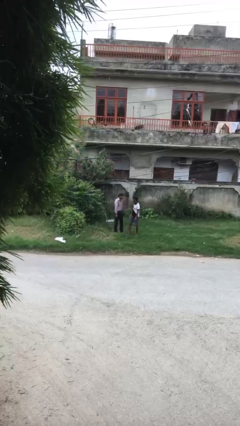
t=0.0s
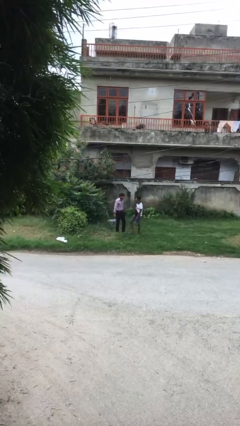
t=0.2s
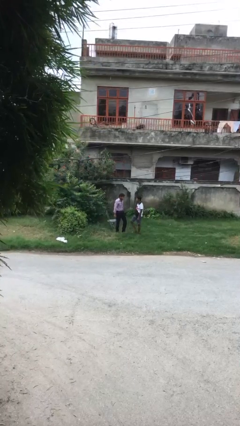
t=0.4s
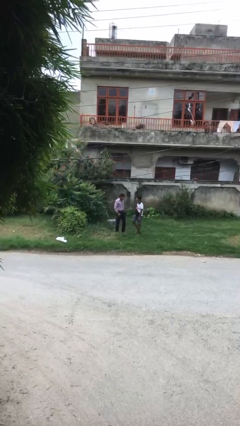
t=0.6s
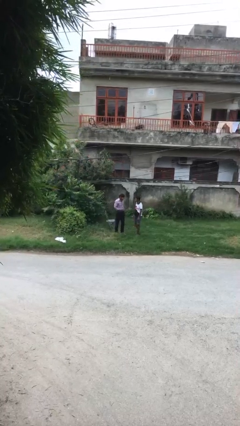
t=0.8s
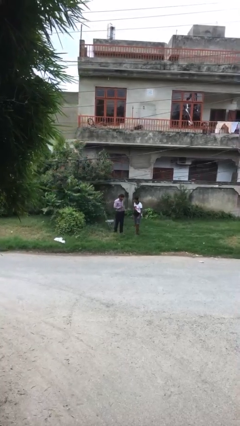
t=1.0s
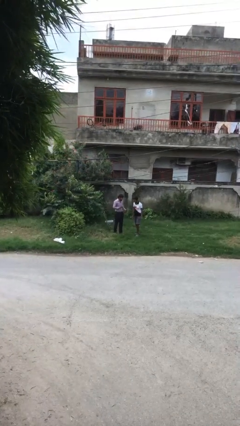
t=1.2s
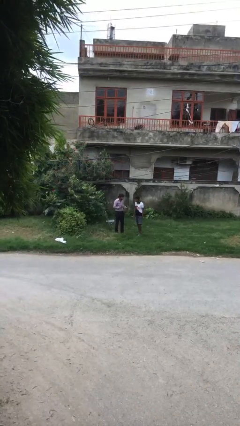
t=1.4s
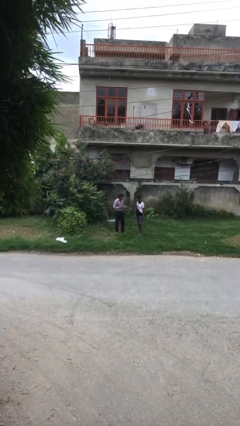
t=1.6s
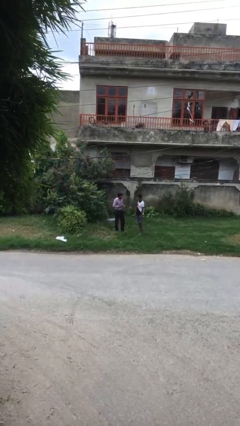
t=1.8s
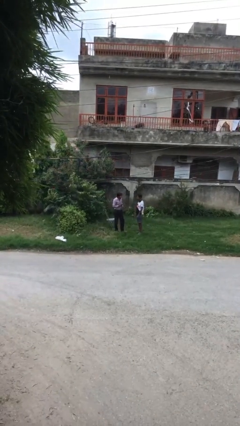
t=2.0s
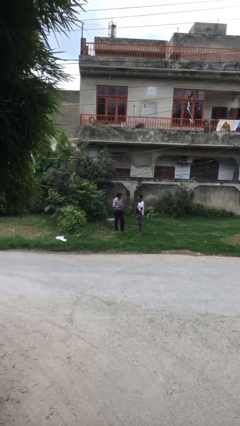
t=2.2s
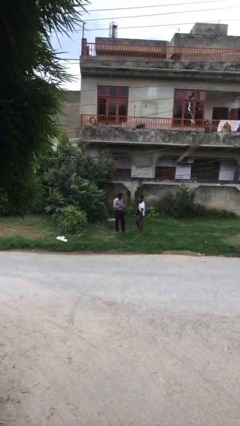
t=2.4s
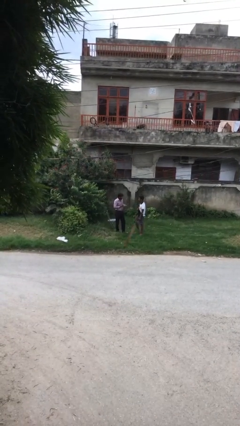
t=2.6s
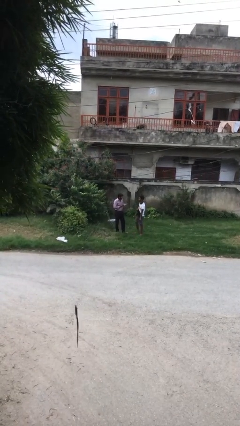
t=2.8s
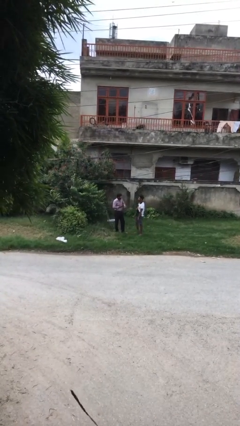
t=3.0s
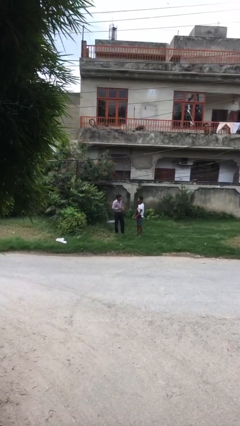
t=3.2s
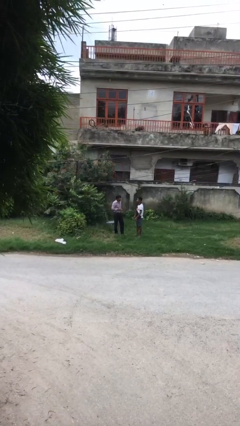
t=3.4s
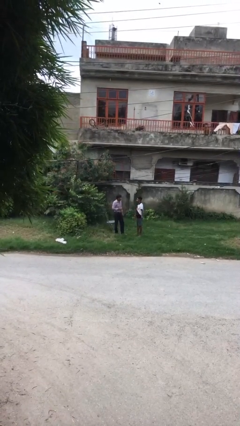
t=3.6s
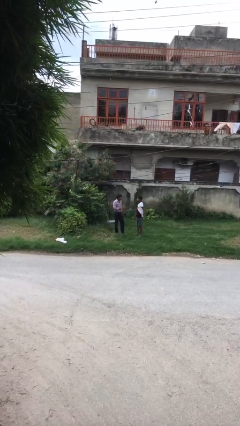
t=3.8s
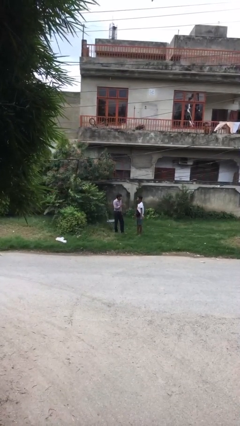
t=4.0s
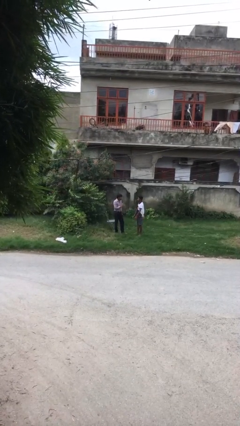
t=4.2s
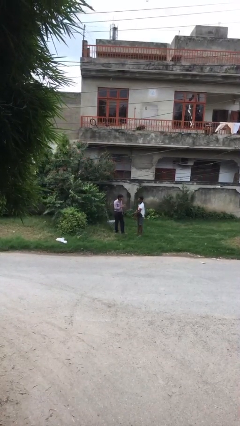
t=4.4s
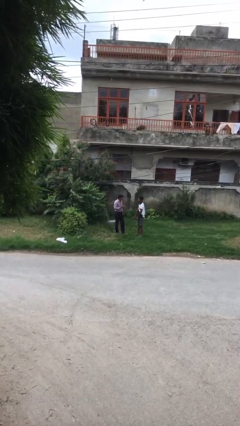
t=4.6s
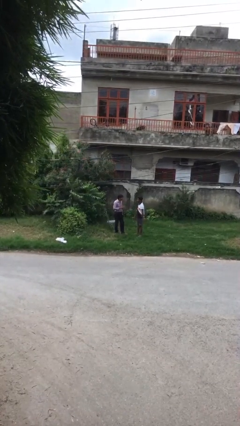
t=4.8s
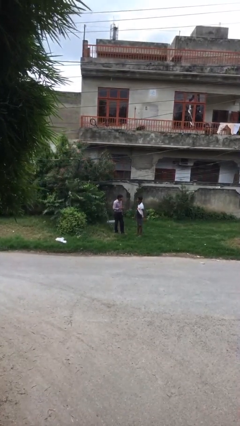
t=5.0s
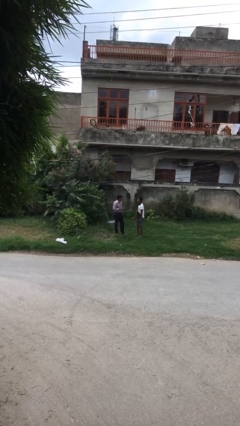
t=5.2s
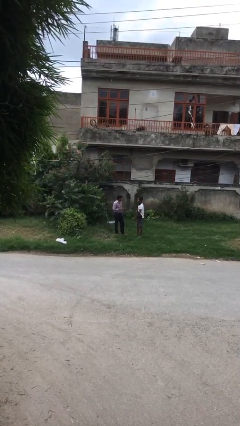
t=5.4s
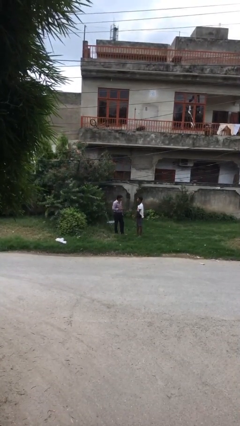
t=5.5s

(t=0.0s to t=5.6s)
person talks to person

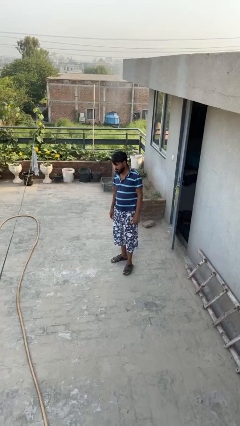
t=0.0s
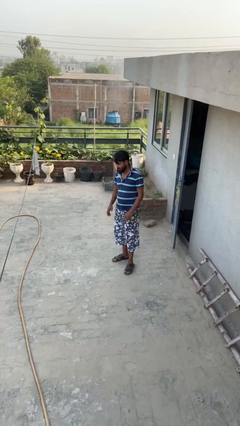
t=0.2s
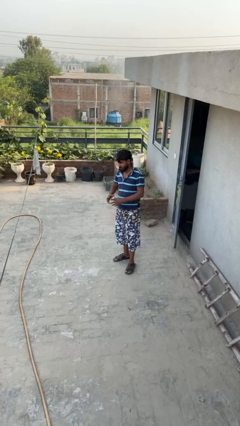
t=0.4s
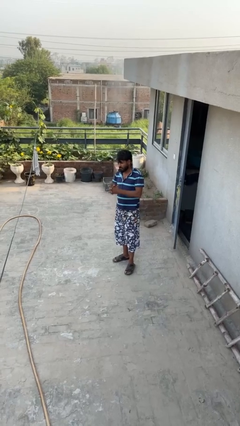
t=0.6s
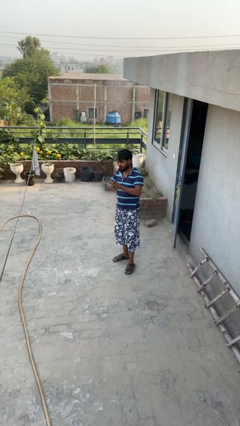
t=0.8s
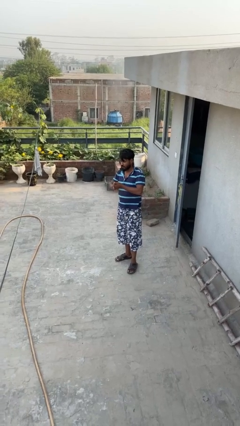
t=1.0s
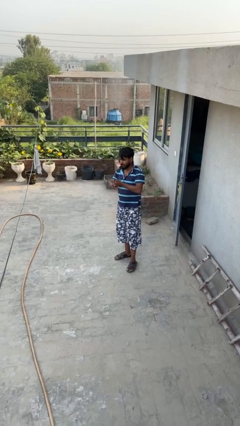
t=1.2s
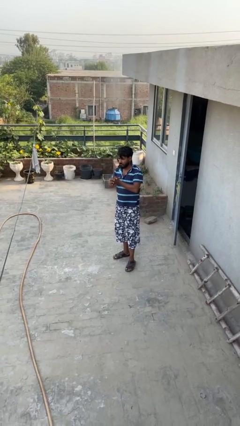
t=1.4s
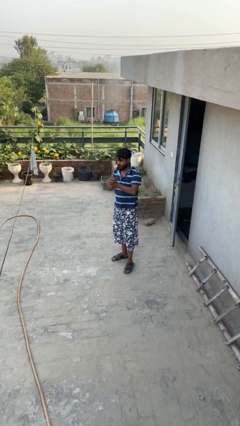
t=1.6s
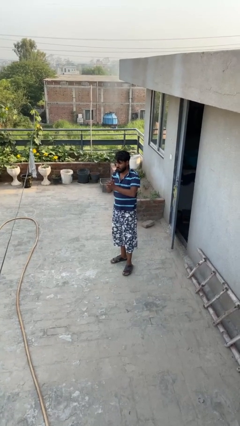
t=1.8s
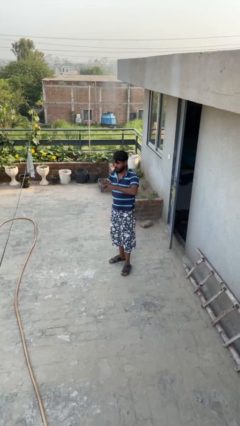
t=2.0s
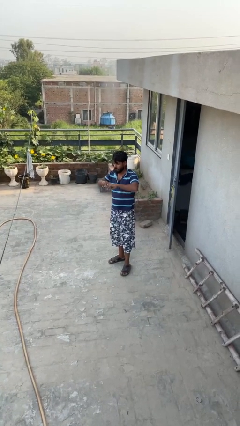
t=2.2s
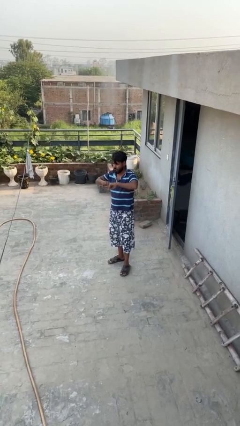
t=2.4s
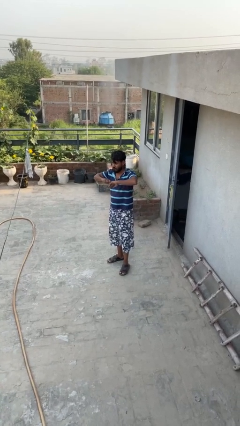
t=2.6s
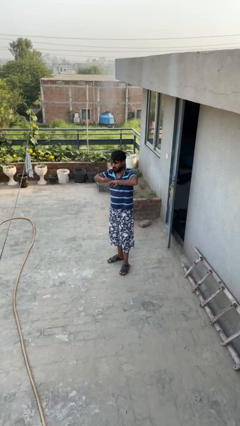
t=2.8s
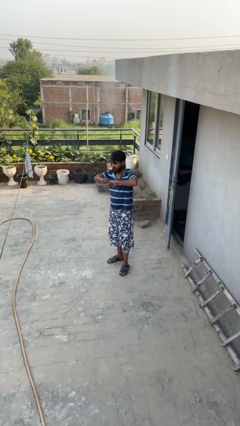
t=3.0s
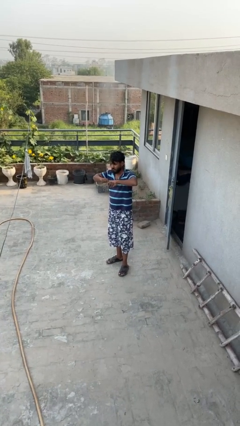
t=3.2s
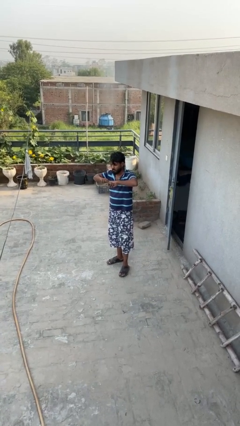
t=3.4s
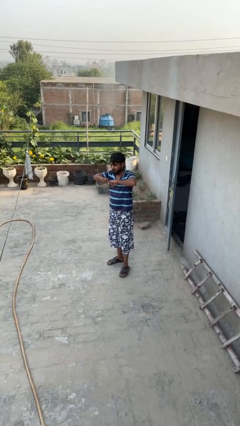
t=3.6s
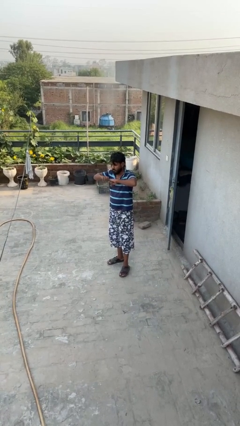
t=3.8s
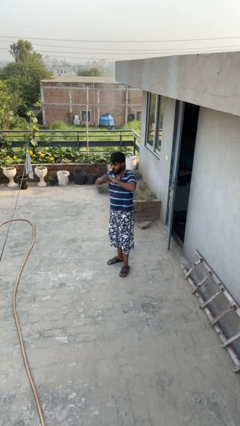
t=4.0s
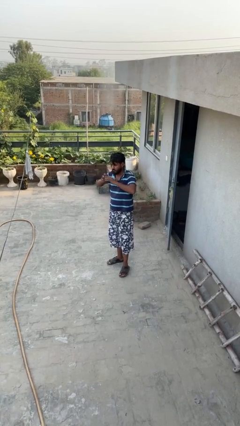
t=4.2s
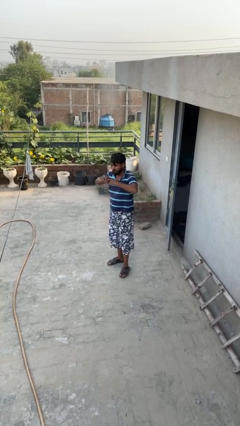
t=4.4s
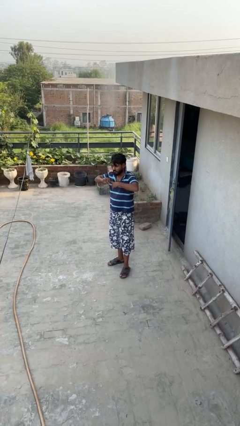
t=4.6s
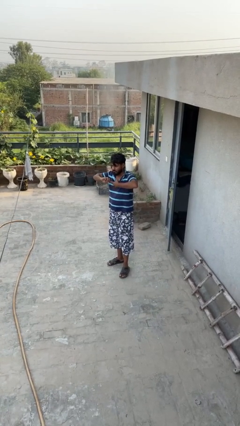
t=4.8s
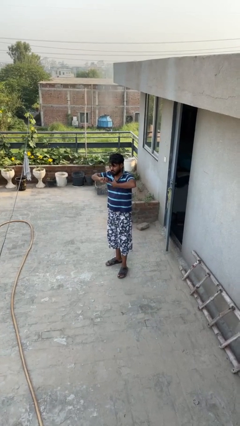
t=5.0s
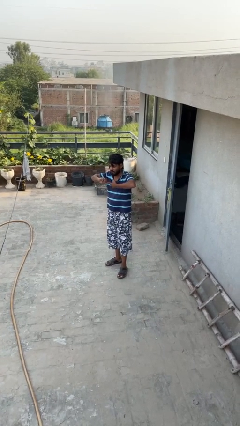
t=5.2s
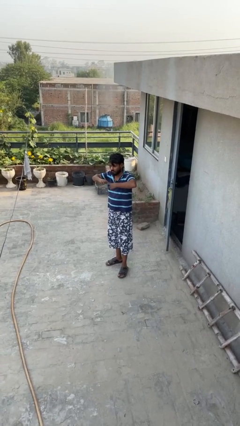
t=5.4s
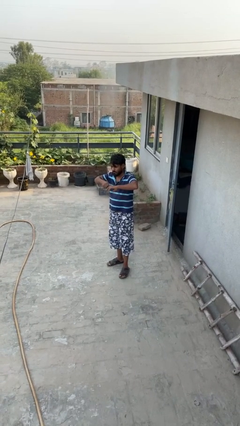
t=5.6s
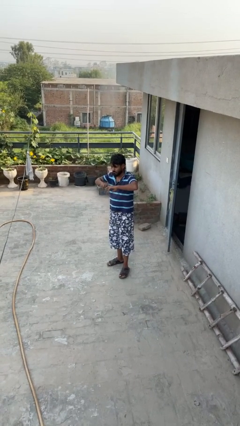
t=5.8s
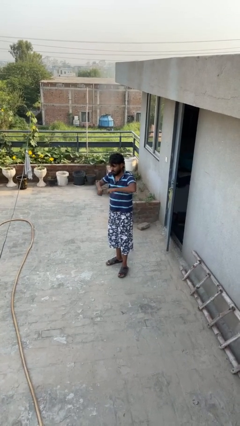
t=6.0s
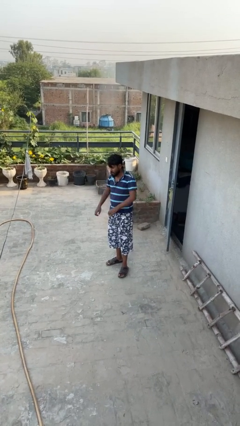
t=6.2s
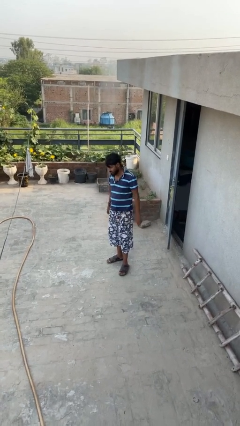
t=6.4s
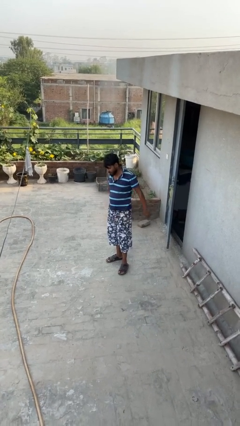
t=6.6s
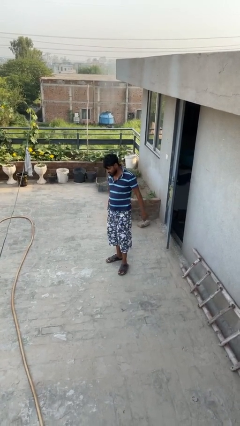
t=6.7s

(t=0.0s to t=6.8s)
person cracks knuckles

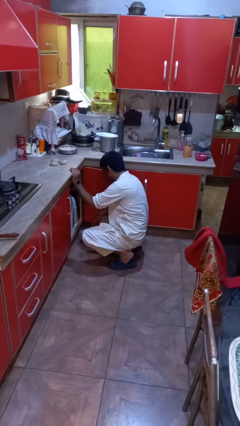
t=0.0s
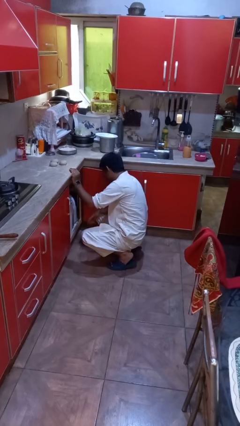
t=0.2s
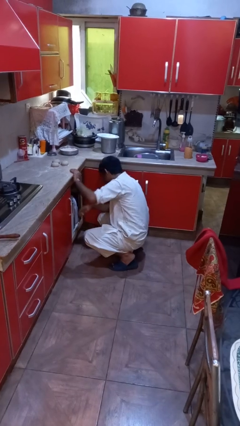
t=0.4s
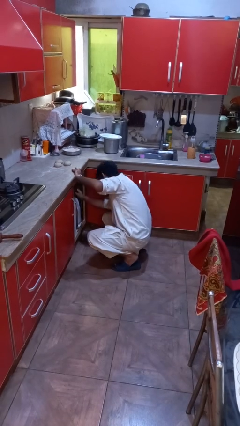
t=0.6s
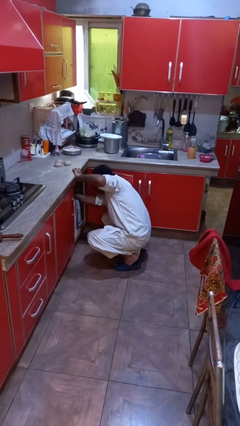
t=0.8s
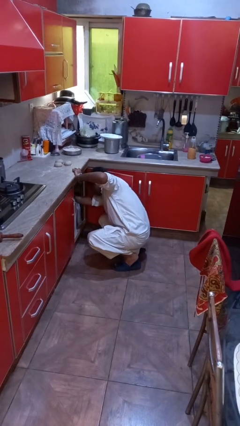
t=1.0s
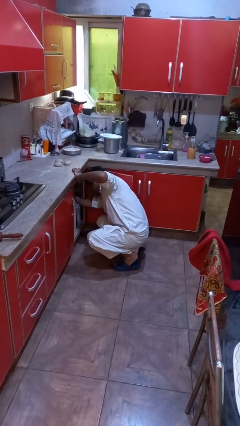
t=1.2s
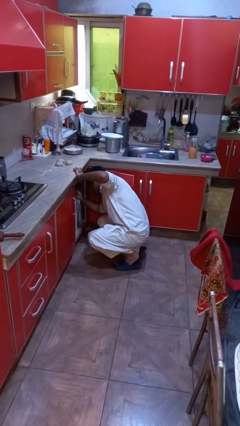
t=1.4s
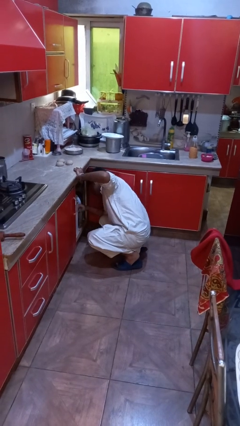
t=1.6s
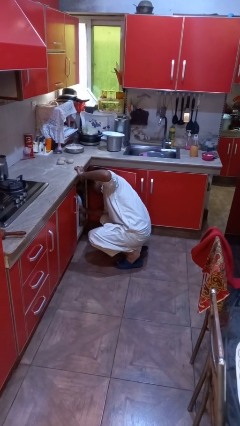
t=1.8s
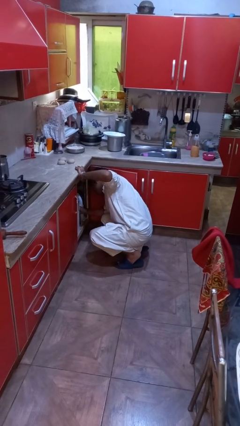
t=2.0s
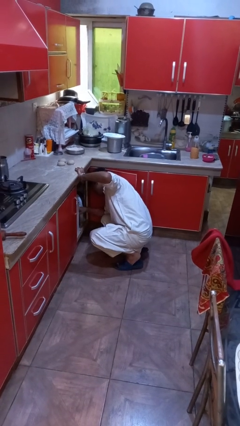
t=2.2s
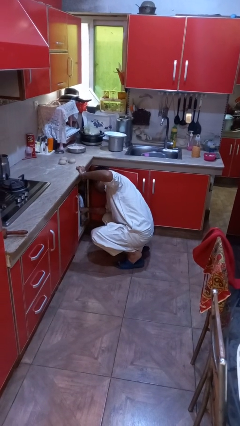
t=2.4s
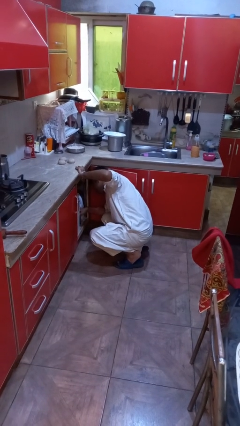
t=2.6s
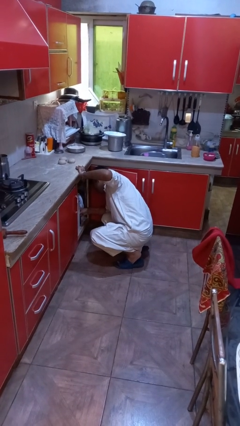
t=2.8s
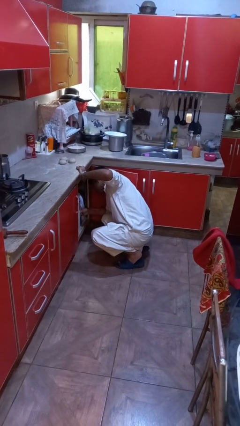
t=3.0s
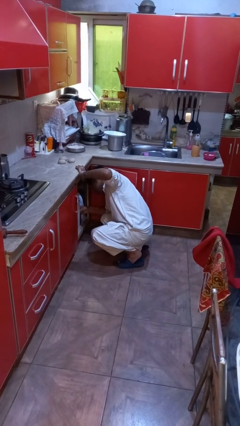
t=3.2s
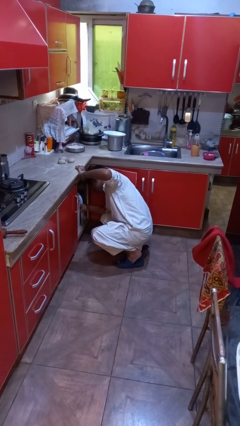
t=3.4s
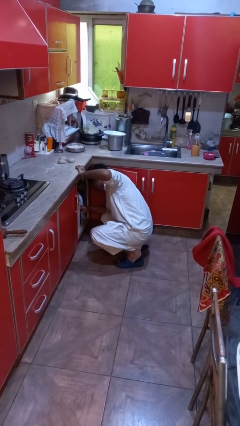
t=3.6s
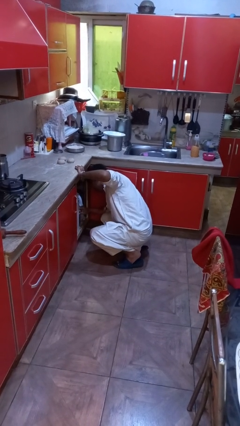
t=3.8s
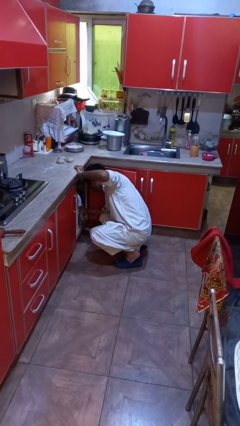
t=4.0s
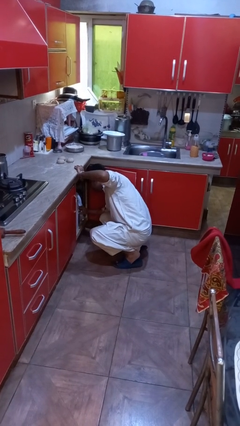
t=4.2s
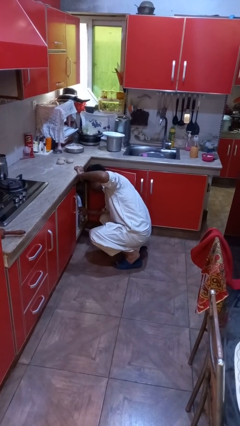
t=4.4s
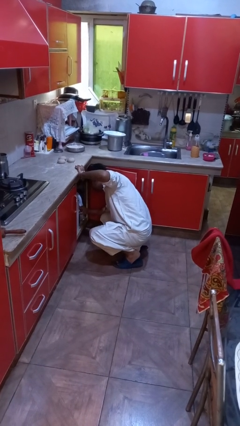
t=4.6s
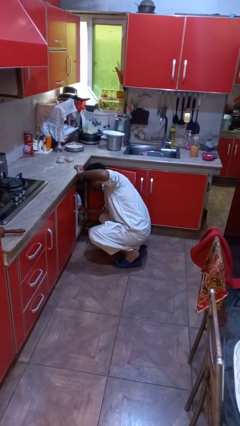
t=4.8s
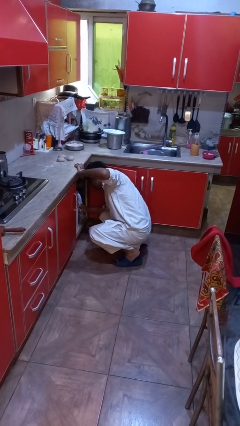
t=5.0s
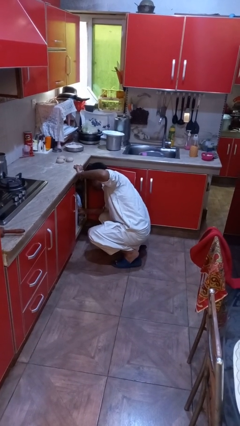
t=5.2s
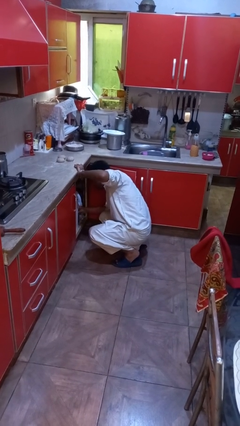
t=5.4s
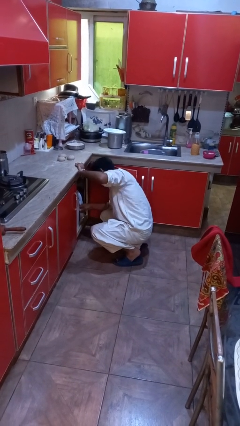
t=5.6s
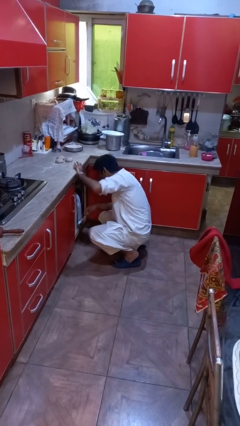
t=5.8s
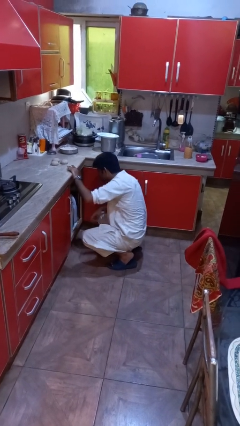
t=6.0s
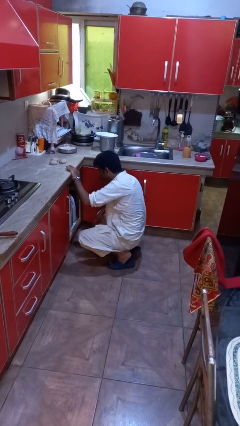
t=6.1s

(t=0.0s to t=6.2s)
person searches in cabinet
